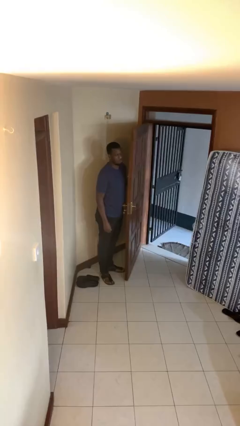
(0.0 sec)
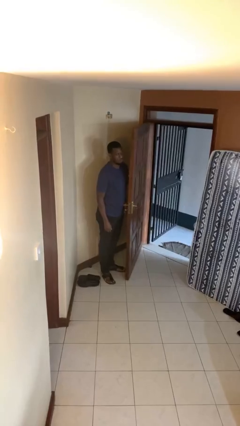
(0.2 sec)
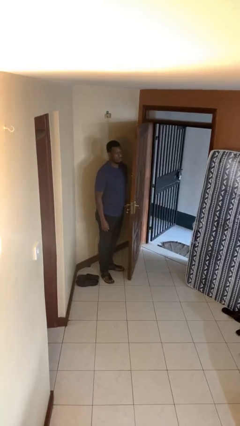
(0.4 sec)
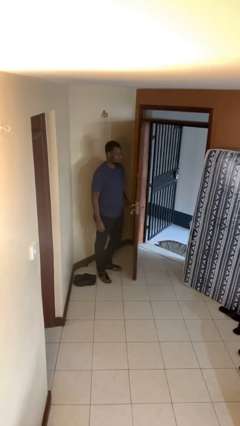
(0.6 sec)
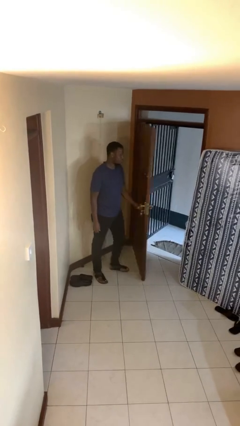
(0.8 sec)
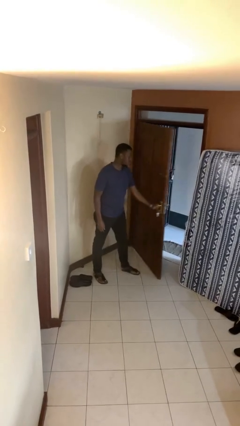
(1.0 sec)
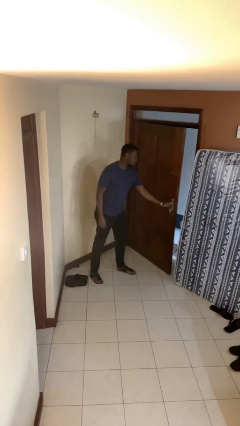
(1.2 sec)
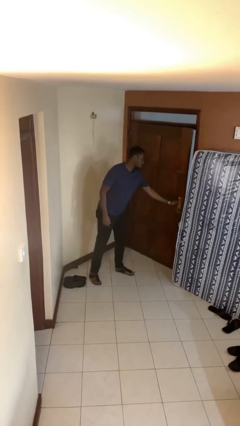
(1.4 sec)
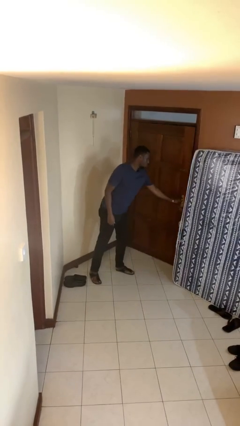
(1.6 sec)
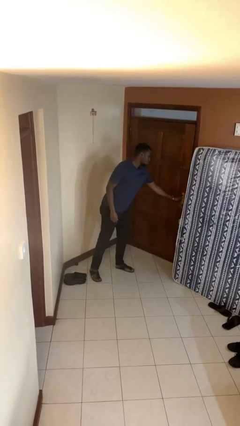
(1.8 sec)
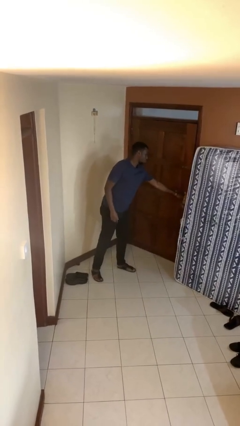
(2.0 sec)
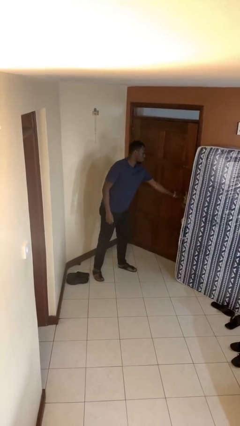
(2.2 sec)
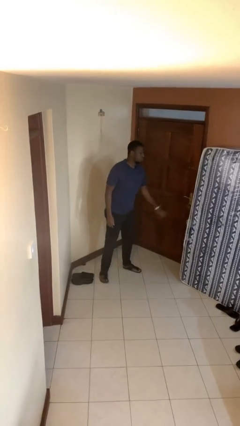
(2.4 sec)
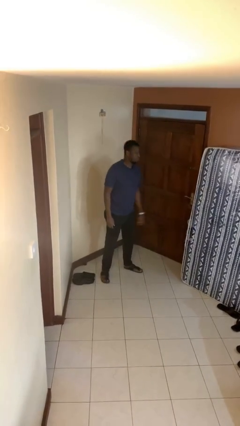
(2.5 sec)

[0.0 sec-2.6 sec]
person closes facility door

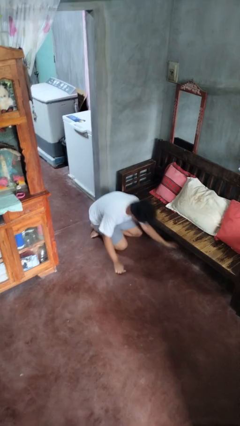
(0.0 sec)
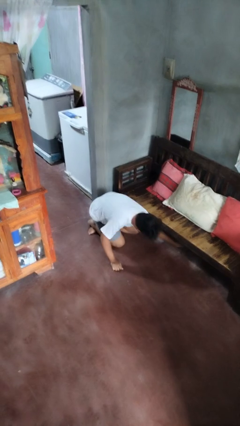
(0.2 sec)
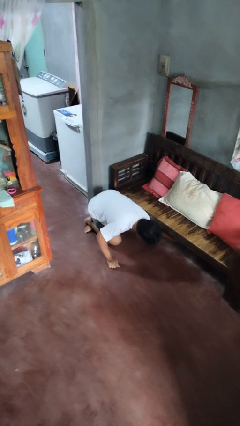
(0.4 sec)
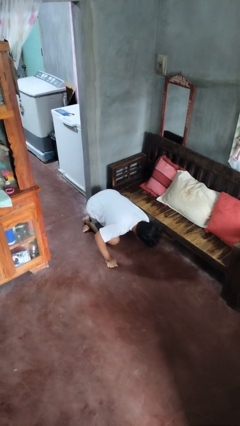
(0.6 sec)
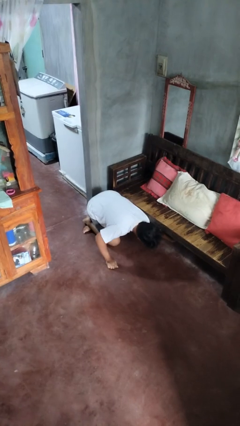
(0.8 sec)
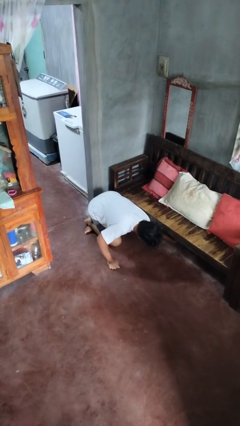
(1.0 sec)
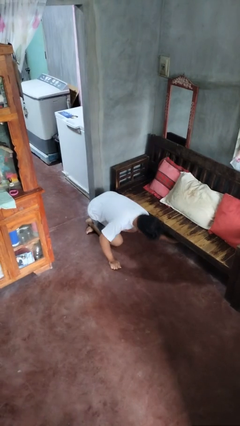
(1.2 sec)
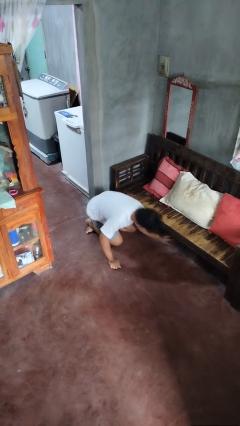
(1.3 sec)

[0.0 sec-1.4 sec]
person searches under couch

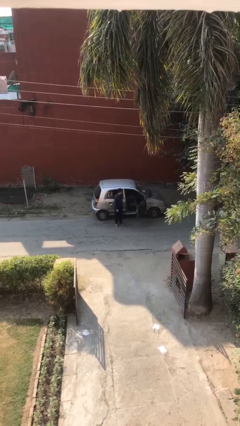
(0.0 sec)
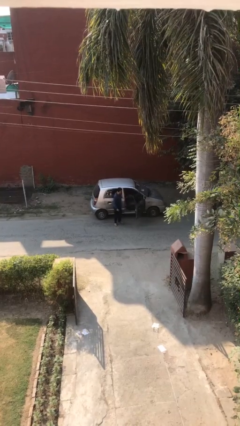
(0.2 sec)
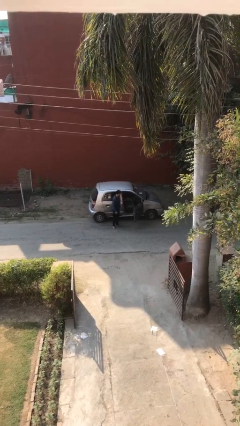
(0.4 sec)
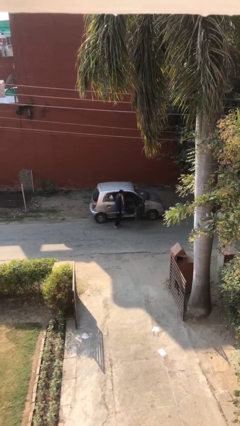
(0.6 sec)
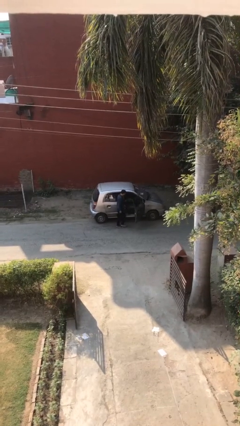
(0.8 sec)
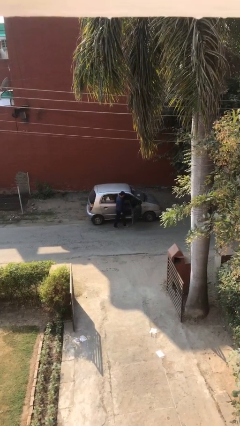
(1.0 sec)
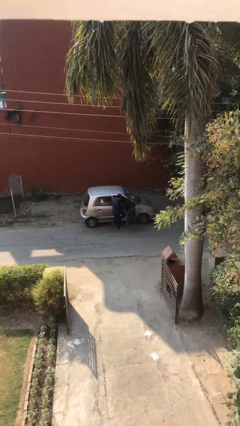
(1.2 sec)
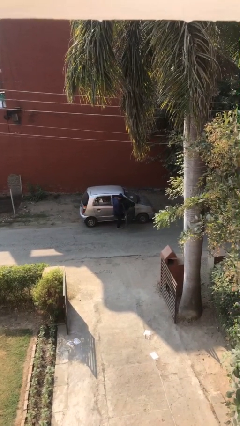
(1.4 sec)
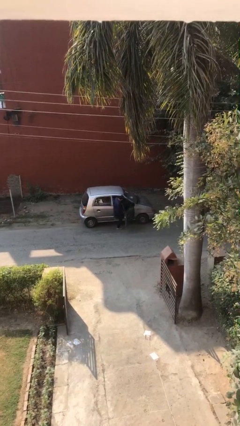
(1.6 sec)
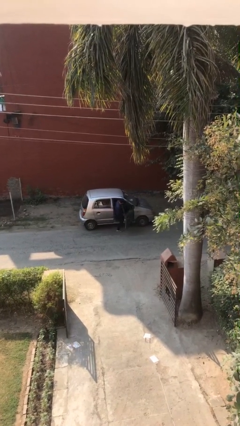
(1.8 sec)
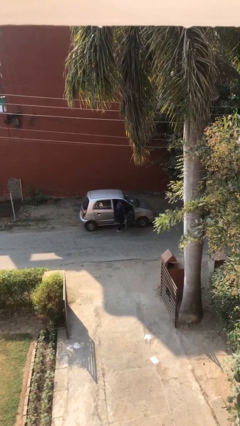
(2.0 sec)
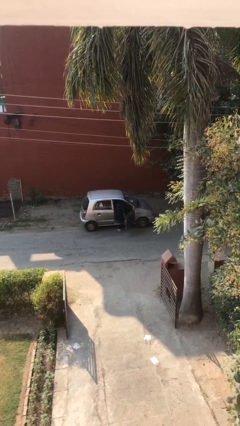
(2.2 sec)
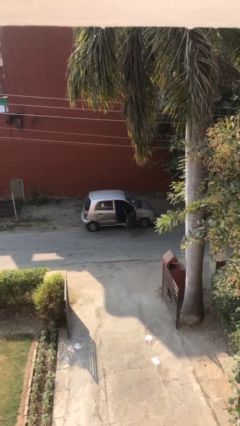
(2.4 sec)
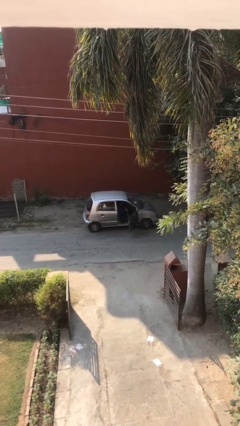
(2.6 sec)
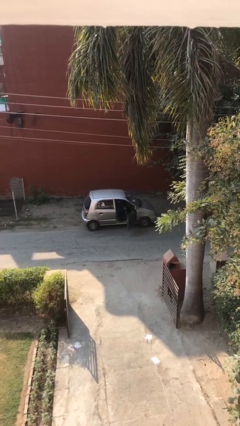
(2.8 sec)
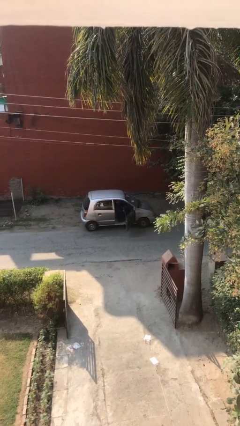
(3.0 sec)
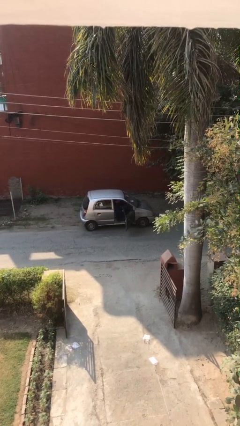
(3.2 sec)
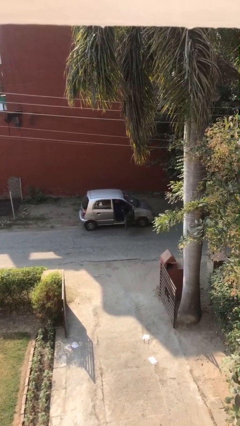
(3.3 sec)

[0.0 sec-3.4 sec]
person enters car

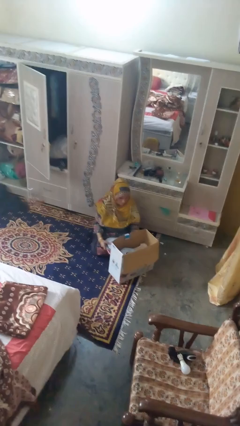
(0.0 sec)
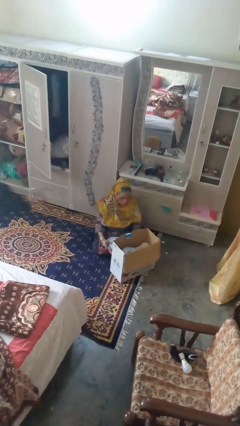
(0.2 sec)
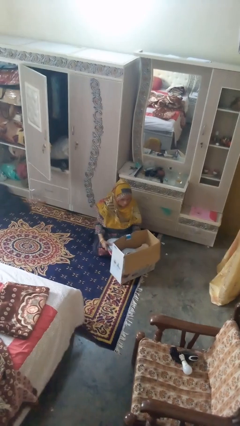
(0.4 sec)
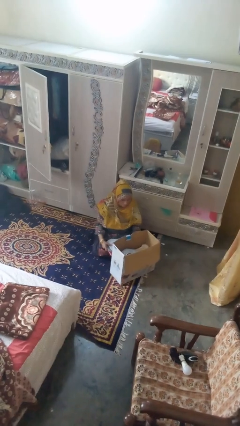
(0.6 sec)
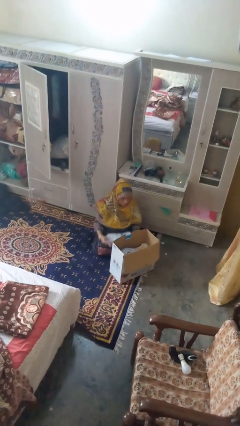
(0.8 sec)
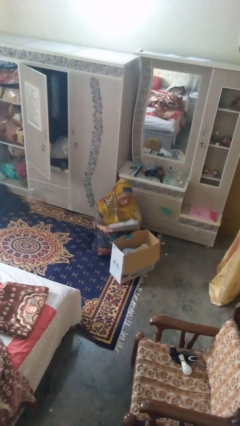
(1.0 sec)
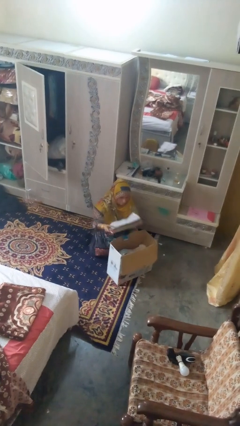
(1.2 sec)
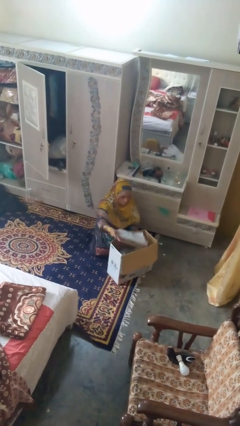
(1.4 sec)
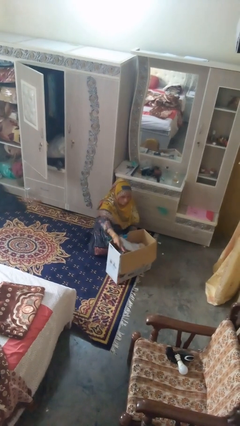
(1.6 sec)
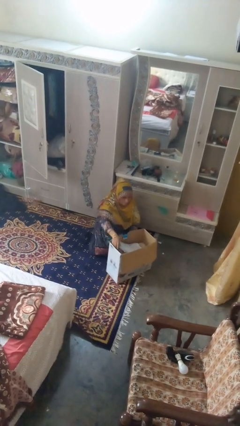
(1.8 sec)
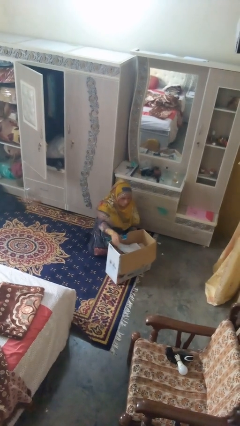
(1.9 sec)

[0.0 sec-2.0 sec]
person puts object into box

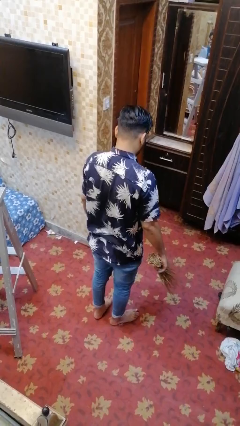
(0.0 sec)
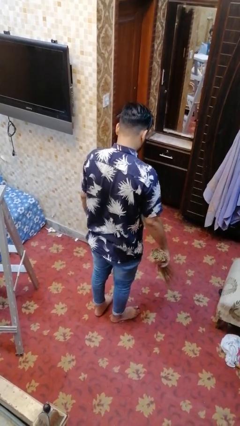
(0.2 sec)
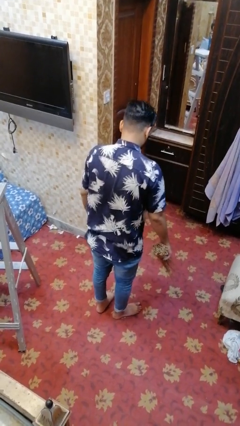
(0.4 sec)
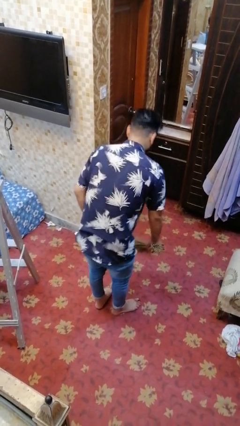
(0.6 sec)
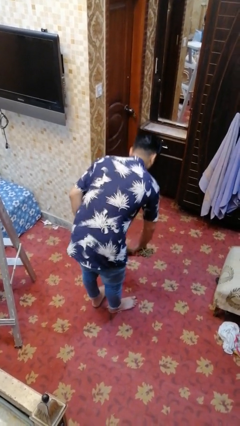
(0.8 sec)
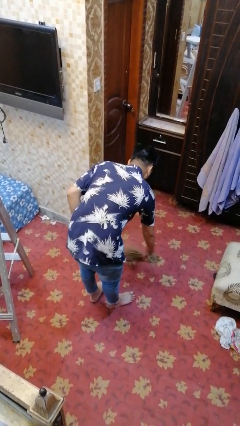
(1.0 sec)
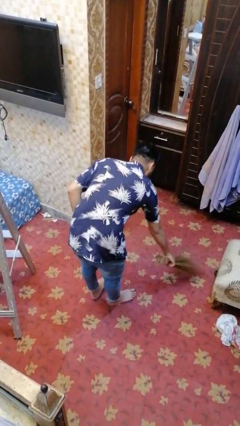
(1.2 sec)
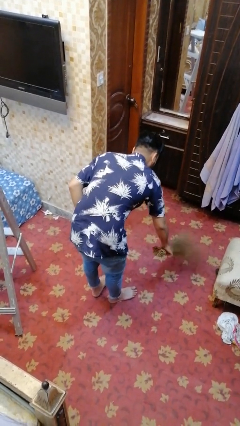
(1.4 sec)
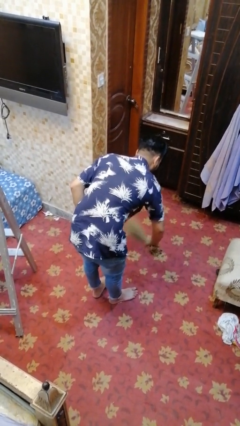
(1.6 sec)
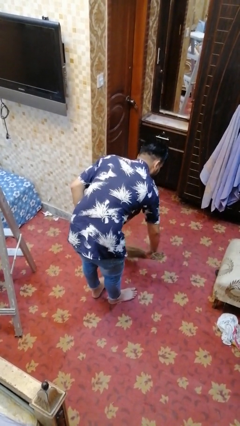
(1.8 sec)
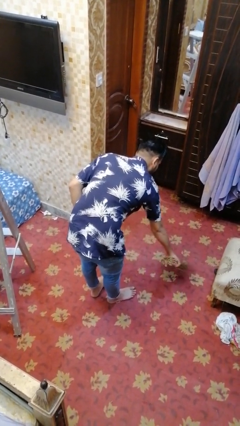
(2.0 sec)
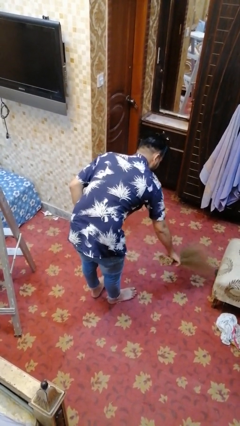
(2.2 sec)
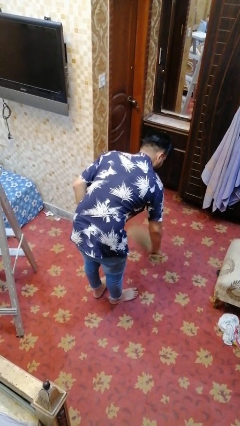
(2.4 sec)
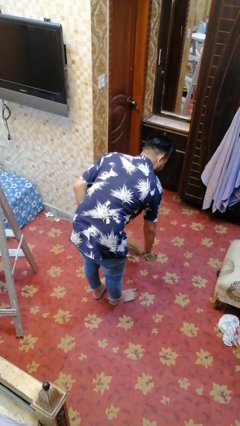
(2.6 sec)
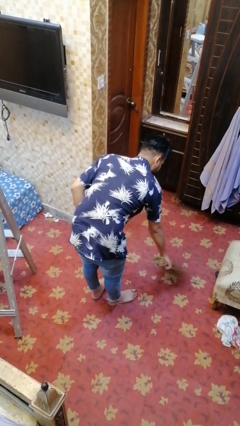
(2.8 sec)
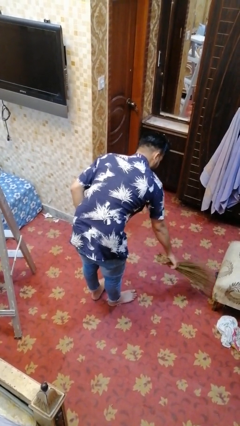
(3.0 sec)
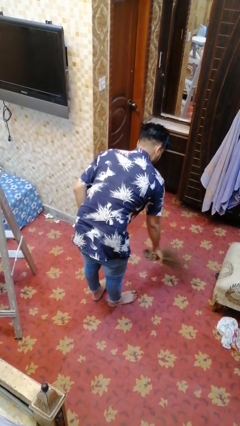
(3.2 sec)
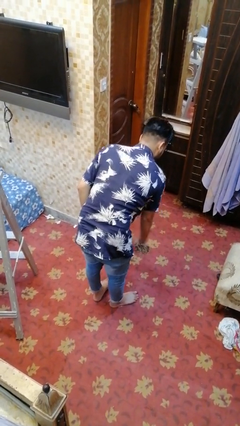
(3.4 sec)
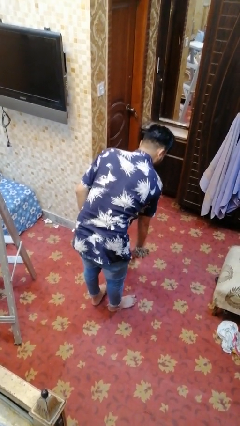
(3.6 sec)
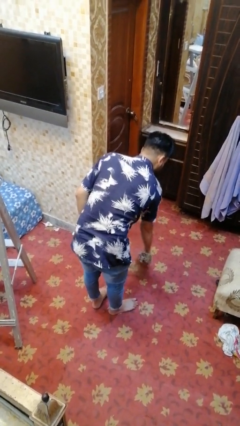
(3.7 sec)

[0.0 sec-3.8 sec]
person sweeps floor

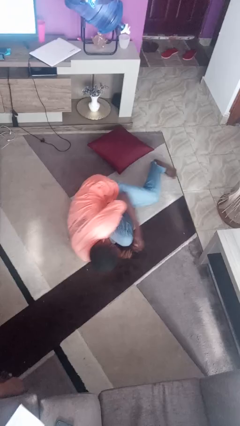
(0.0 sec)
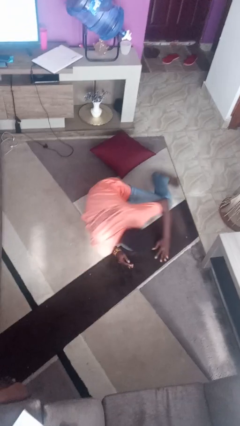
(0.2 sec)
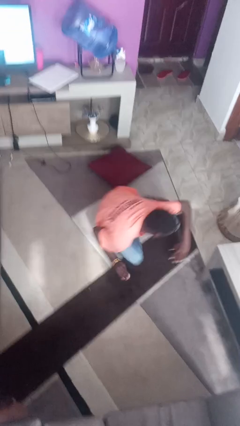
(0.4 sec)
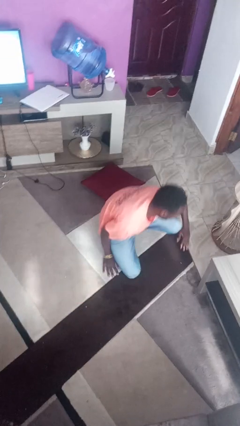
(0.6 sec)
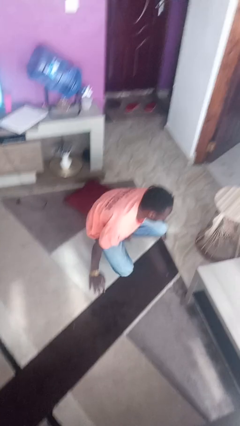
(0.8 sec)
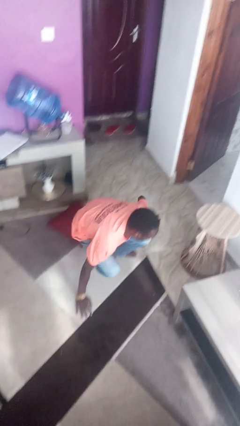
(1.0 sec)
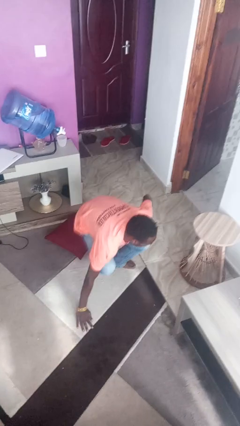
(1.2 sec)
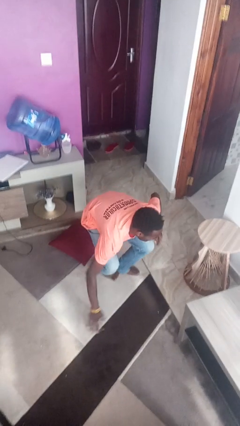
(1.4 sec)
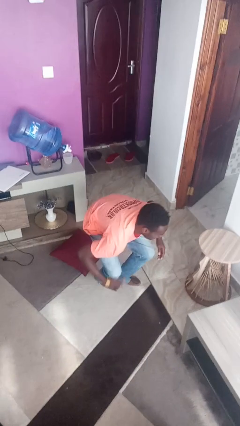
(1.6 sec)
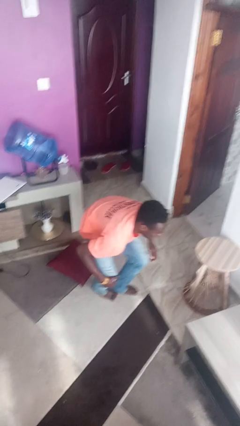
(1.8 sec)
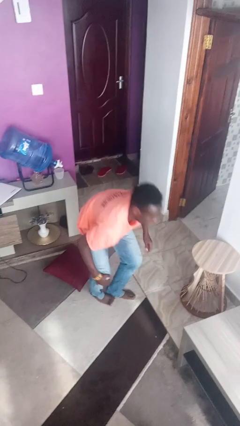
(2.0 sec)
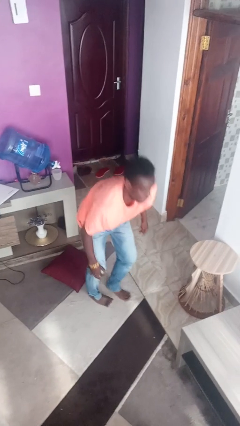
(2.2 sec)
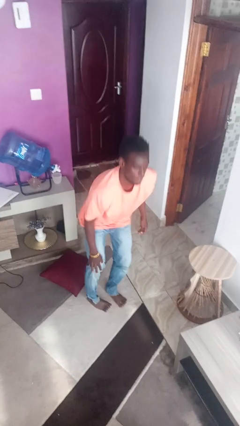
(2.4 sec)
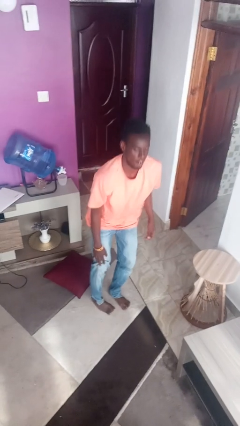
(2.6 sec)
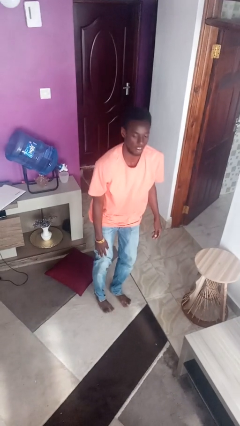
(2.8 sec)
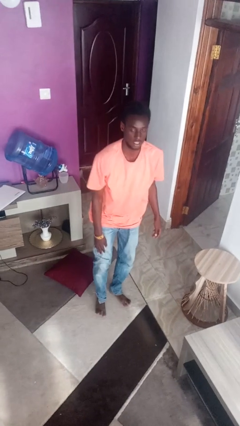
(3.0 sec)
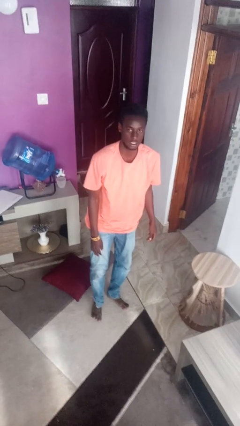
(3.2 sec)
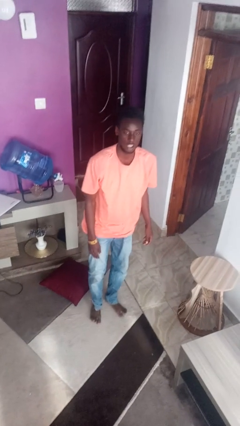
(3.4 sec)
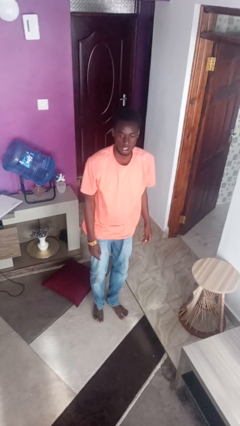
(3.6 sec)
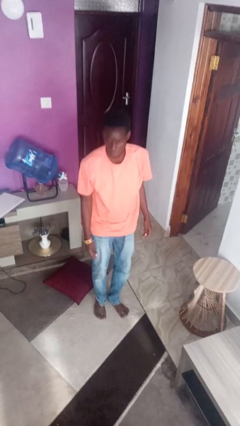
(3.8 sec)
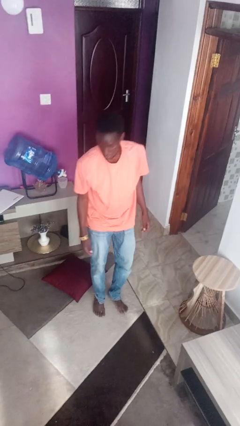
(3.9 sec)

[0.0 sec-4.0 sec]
person stands up from floor

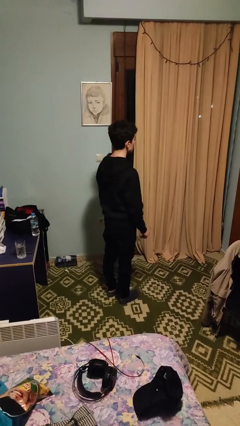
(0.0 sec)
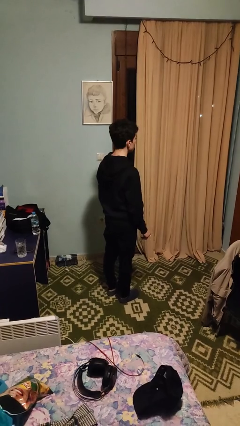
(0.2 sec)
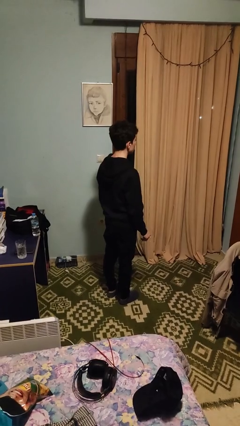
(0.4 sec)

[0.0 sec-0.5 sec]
person takes off glasses
